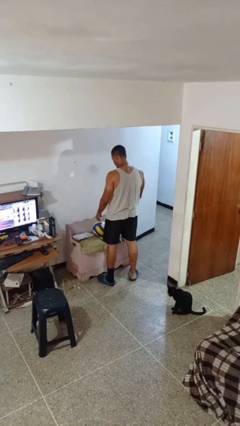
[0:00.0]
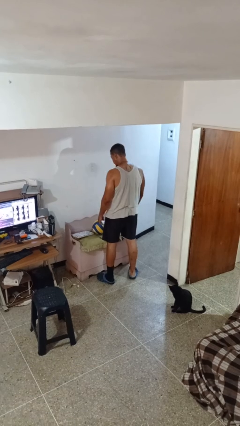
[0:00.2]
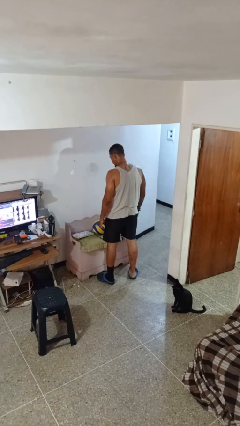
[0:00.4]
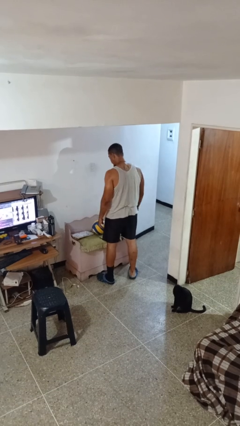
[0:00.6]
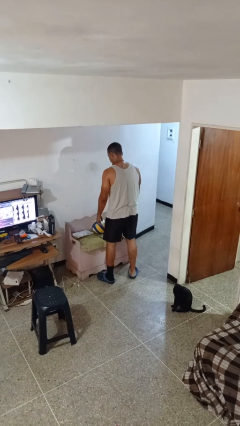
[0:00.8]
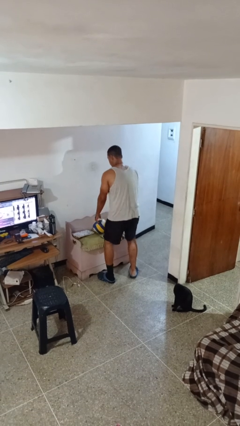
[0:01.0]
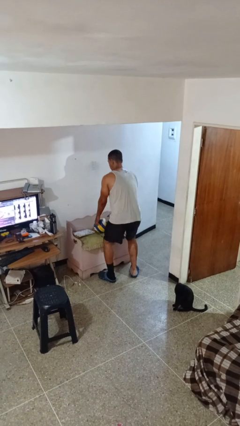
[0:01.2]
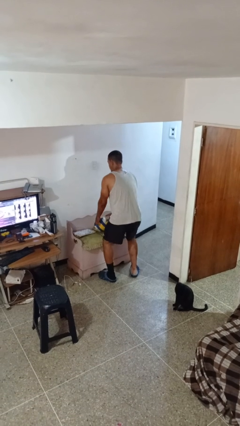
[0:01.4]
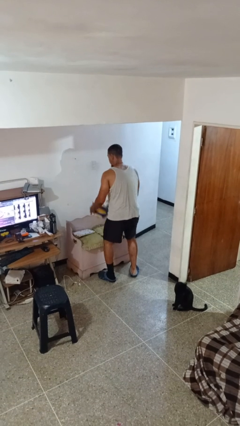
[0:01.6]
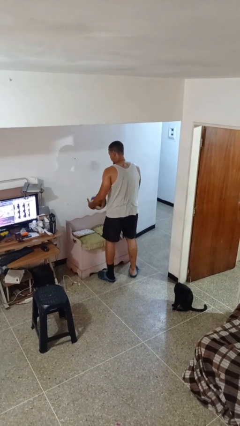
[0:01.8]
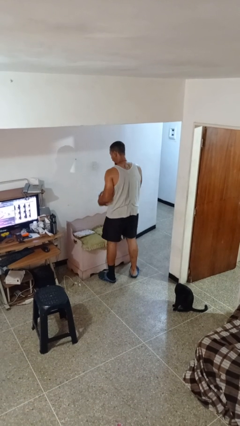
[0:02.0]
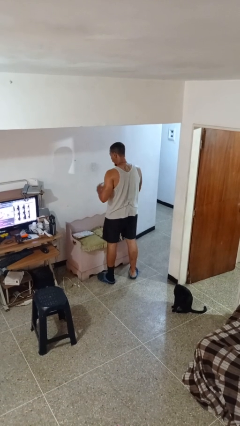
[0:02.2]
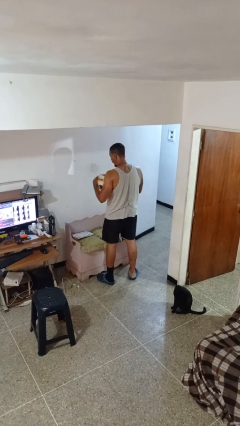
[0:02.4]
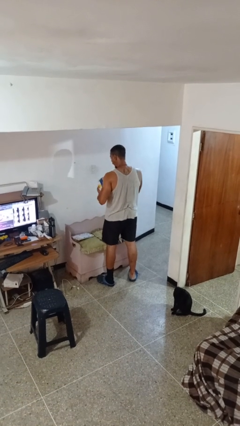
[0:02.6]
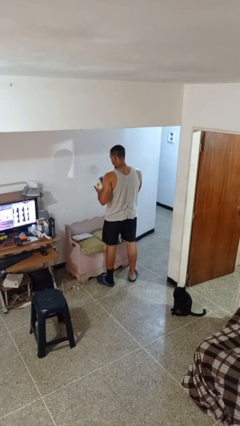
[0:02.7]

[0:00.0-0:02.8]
person picks up object from couch

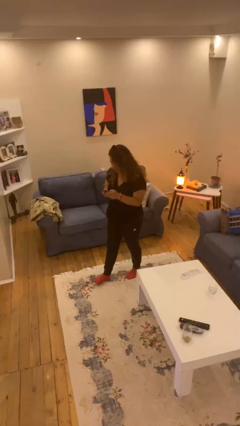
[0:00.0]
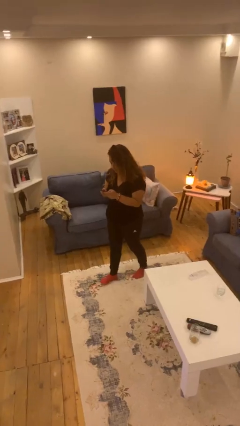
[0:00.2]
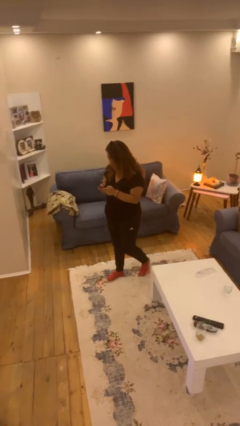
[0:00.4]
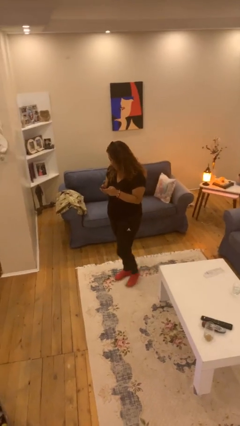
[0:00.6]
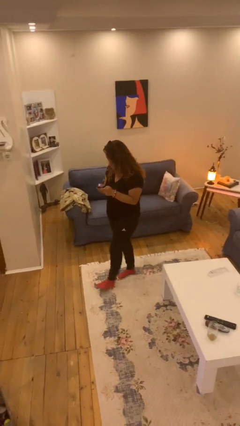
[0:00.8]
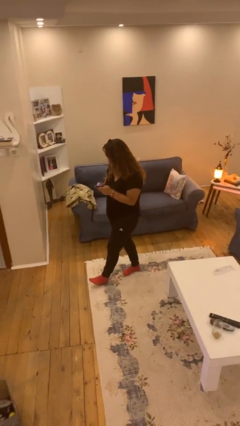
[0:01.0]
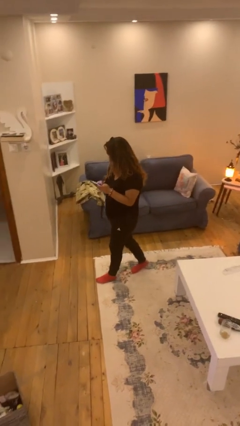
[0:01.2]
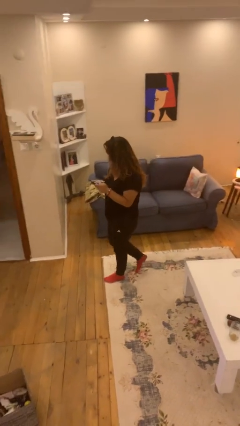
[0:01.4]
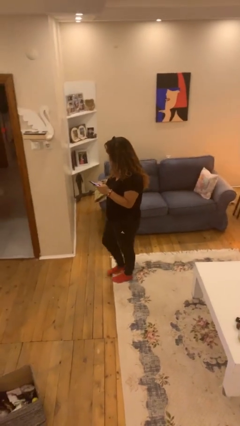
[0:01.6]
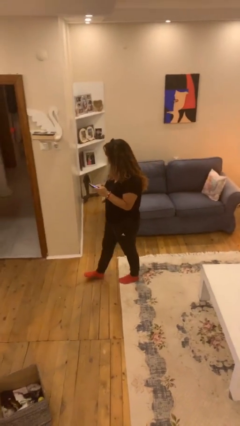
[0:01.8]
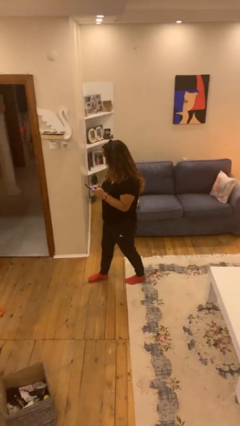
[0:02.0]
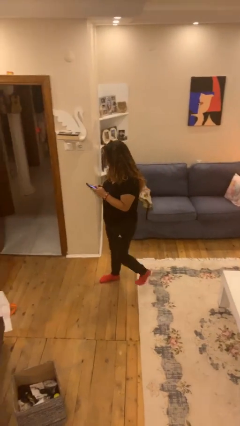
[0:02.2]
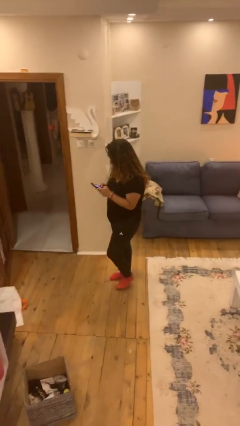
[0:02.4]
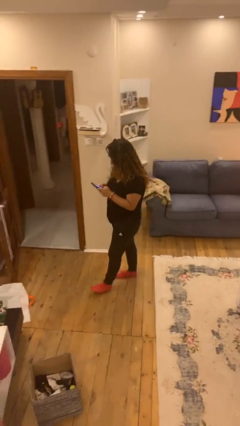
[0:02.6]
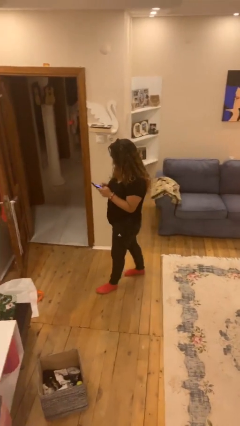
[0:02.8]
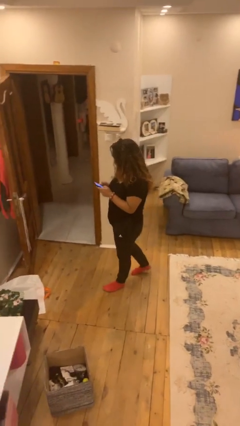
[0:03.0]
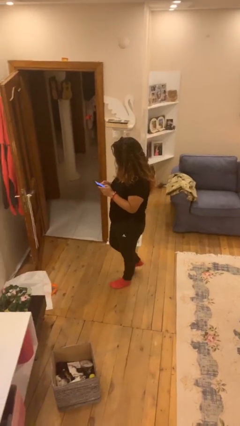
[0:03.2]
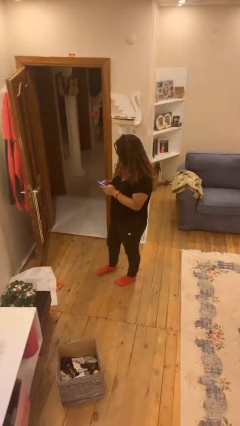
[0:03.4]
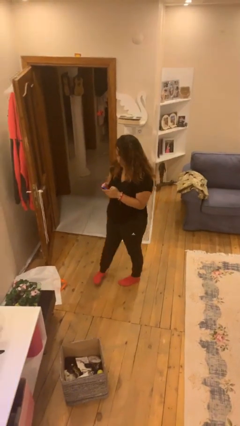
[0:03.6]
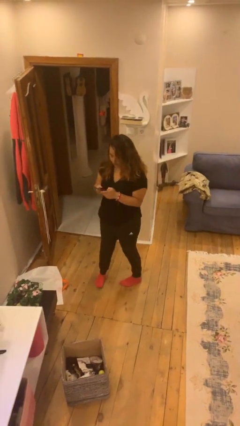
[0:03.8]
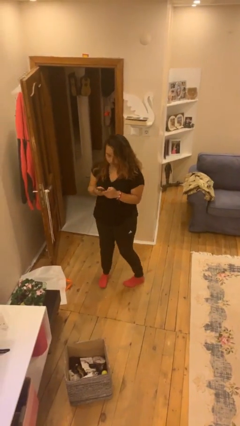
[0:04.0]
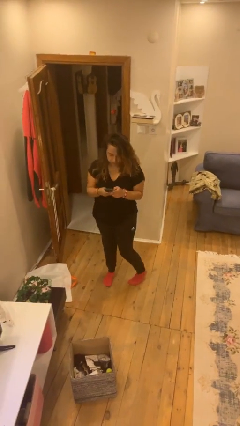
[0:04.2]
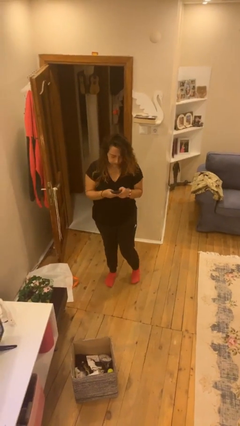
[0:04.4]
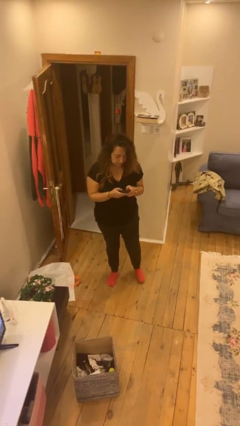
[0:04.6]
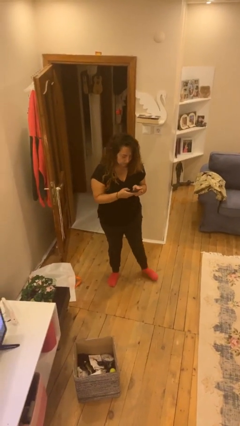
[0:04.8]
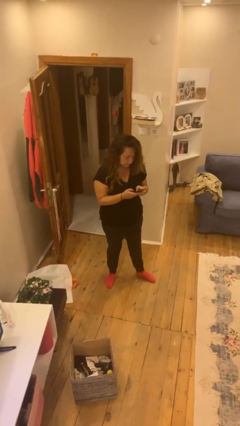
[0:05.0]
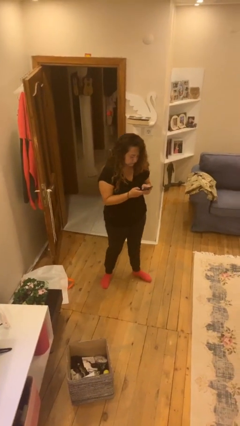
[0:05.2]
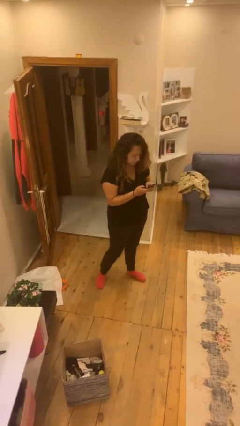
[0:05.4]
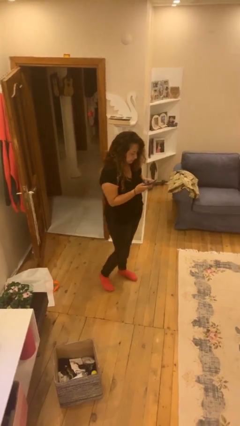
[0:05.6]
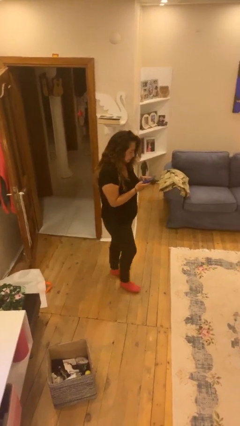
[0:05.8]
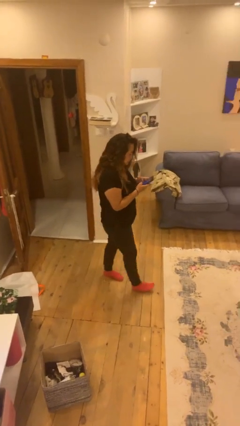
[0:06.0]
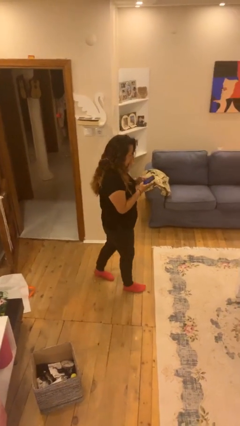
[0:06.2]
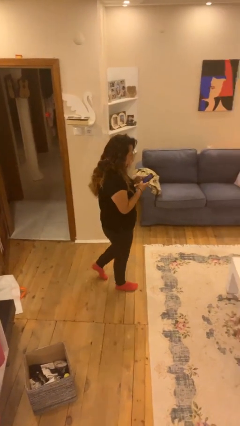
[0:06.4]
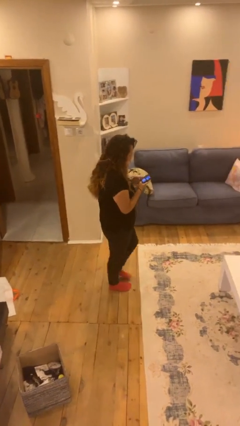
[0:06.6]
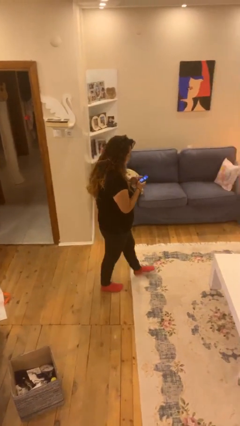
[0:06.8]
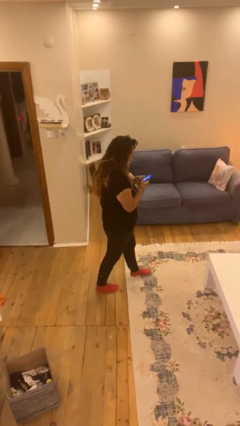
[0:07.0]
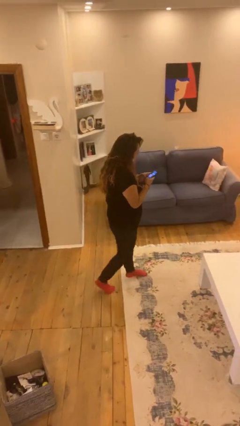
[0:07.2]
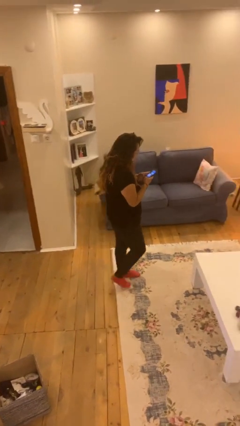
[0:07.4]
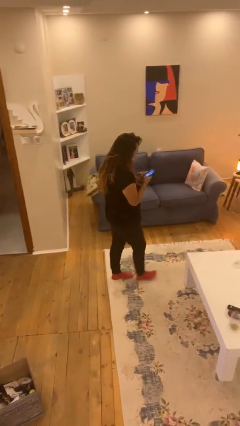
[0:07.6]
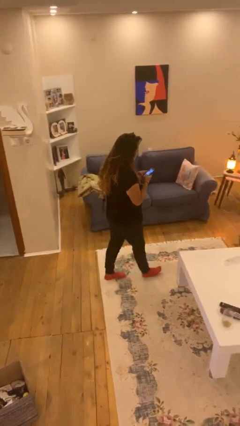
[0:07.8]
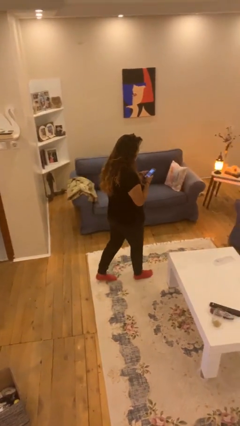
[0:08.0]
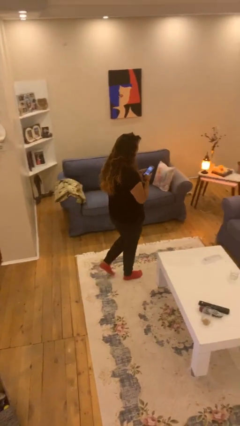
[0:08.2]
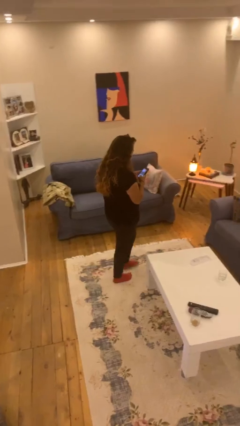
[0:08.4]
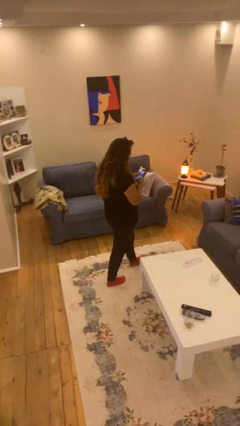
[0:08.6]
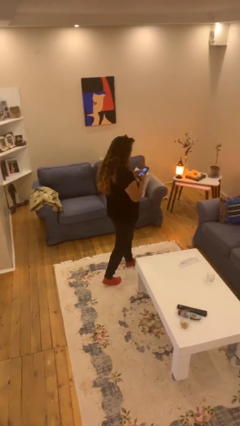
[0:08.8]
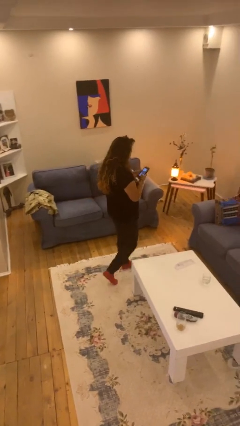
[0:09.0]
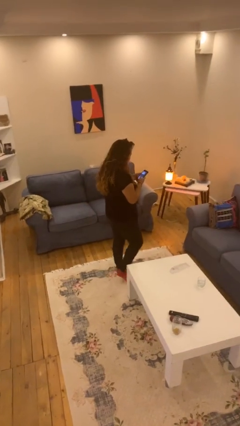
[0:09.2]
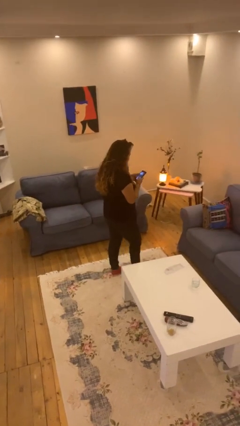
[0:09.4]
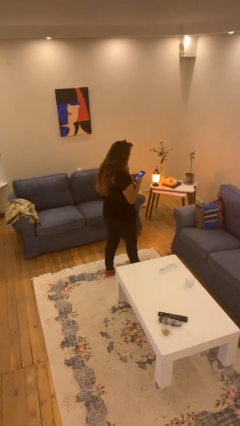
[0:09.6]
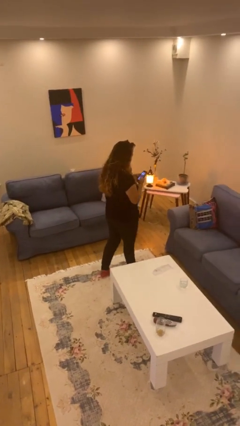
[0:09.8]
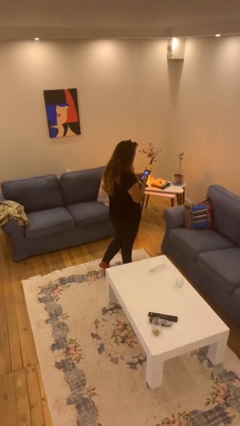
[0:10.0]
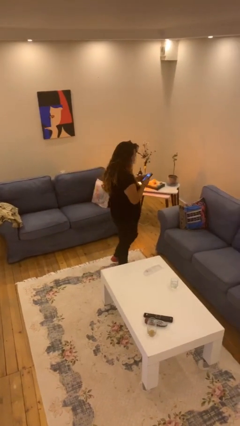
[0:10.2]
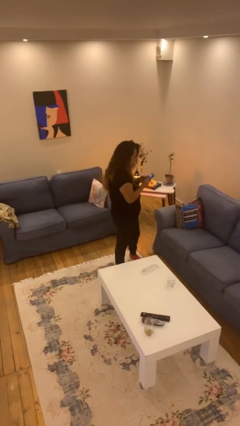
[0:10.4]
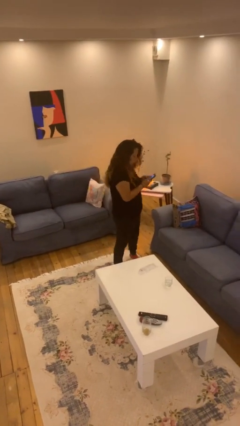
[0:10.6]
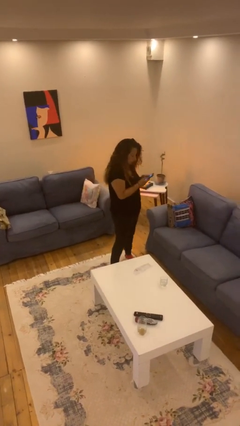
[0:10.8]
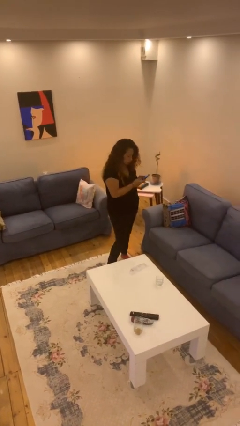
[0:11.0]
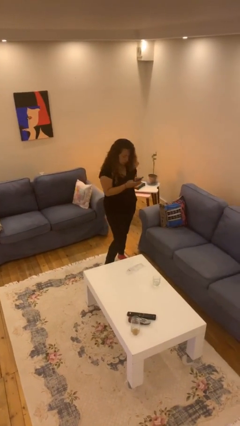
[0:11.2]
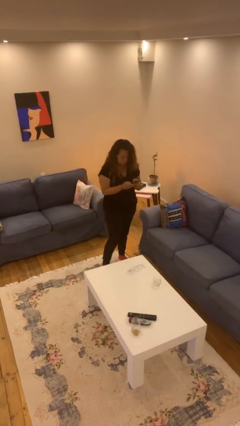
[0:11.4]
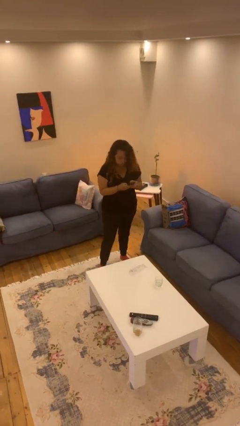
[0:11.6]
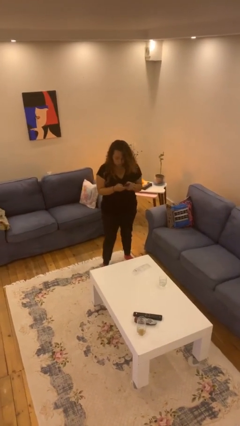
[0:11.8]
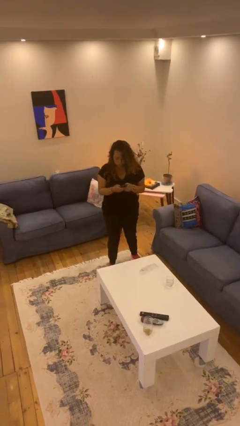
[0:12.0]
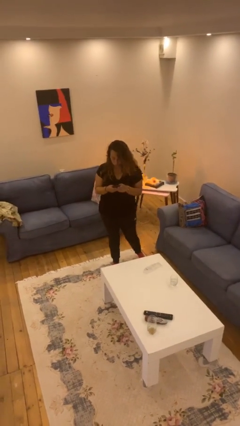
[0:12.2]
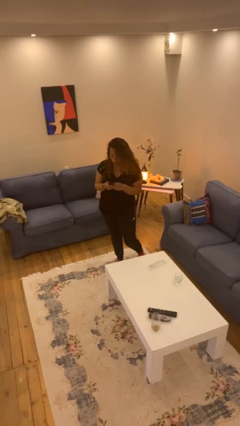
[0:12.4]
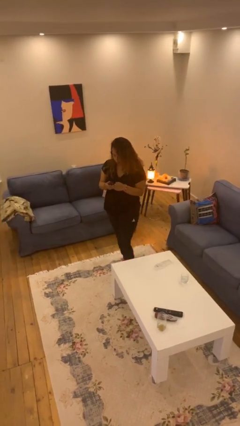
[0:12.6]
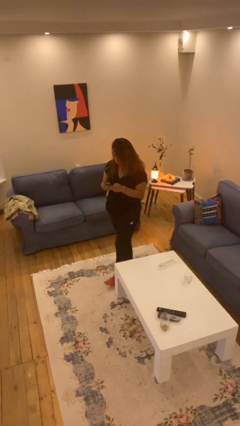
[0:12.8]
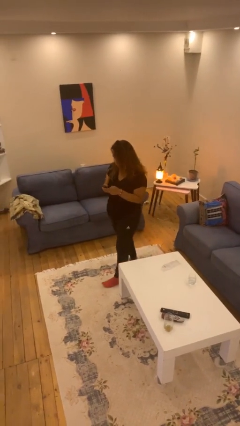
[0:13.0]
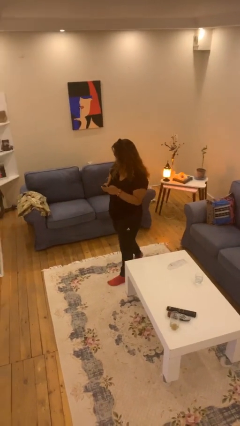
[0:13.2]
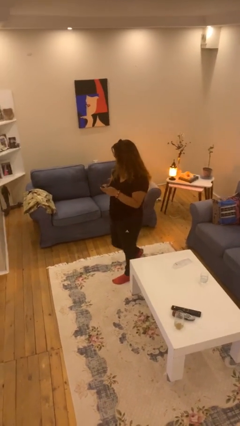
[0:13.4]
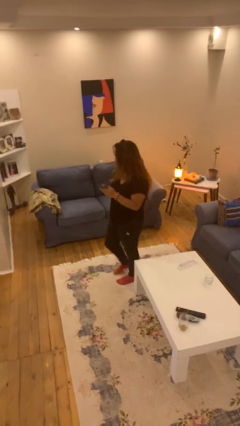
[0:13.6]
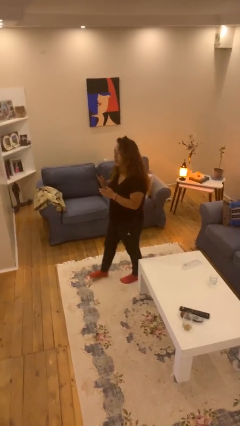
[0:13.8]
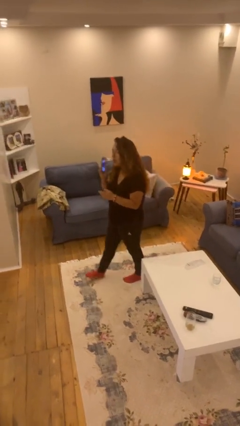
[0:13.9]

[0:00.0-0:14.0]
person texts on phone

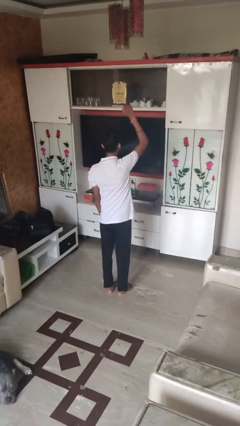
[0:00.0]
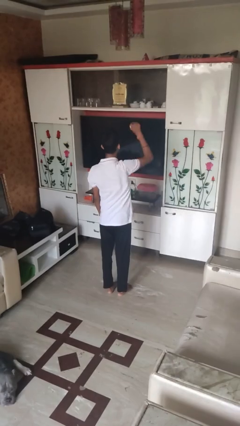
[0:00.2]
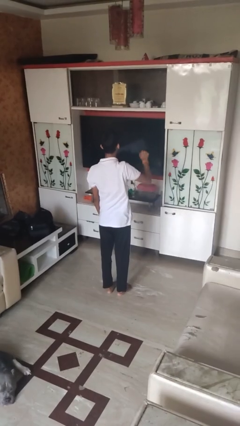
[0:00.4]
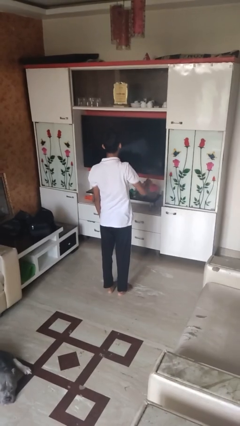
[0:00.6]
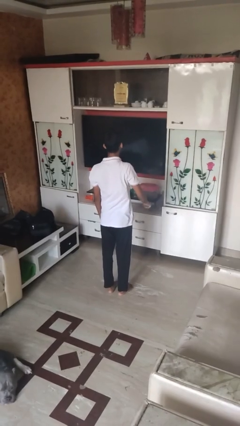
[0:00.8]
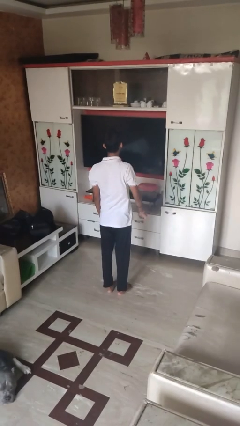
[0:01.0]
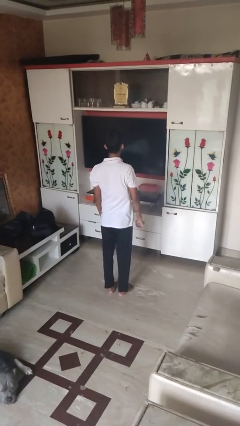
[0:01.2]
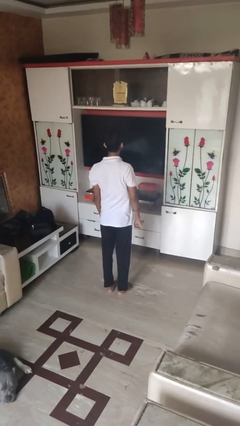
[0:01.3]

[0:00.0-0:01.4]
person gestures lower hand
